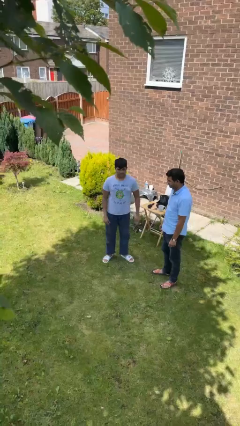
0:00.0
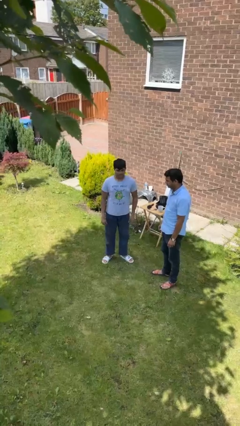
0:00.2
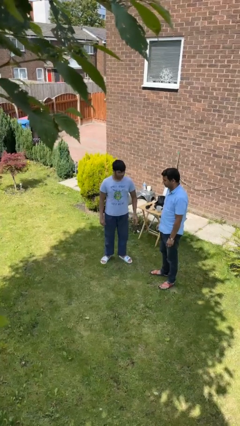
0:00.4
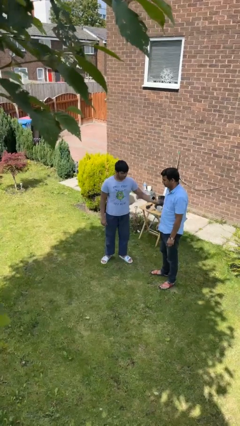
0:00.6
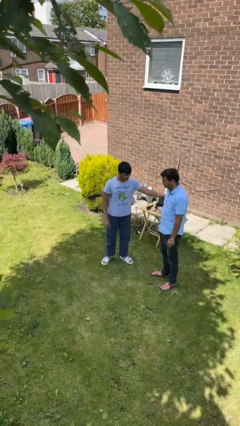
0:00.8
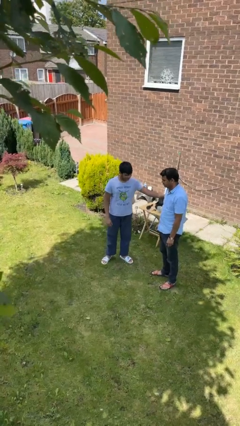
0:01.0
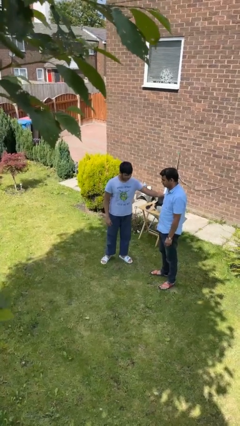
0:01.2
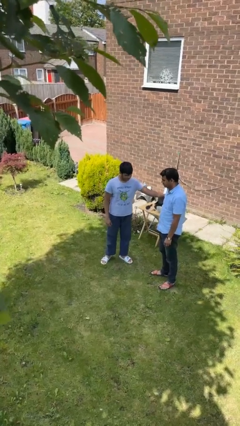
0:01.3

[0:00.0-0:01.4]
person grabs person by bicep

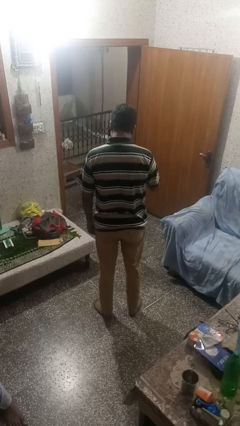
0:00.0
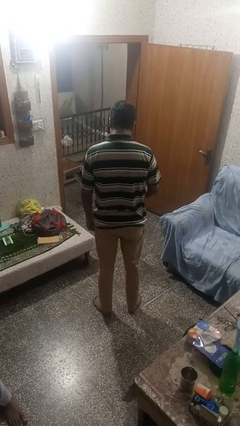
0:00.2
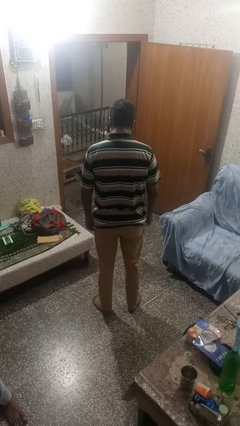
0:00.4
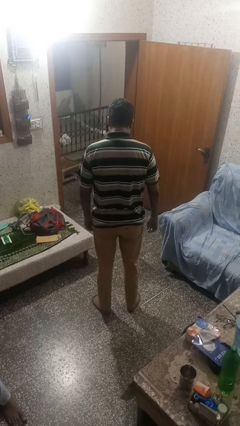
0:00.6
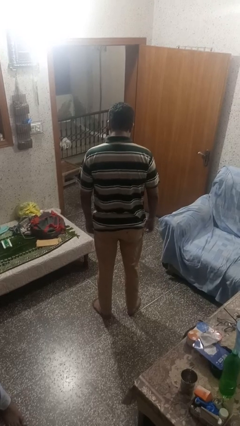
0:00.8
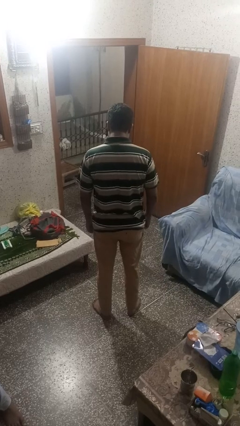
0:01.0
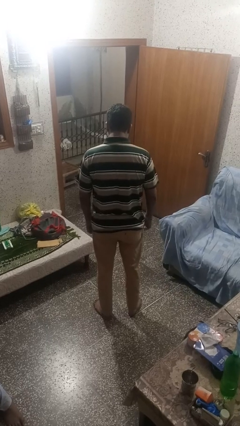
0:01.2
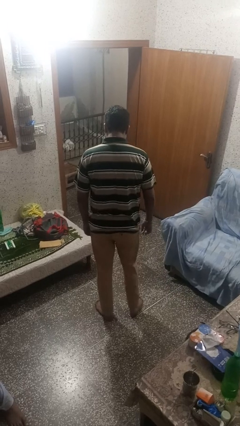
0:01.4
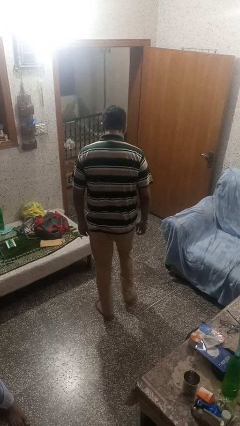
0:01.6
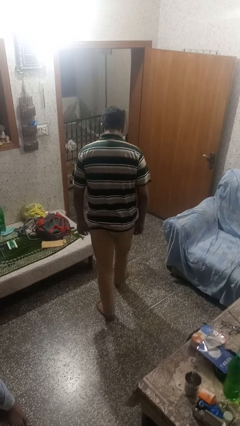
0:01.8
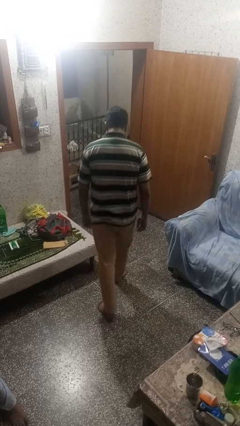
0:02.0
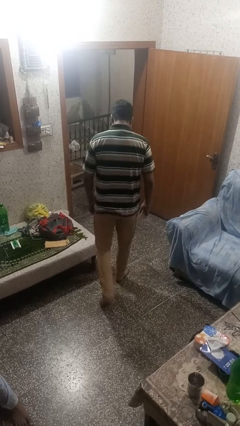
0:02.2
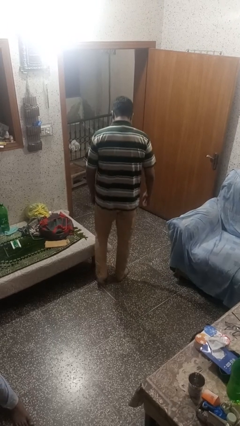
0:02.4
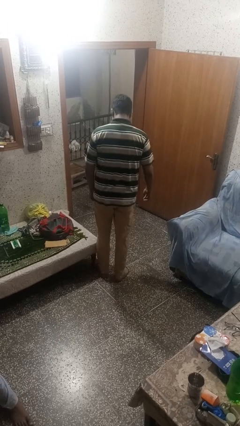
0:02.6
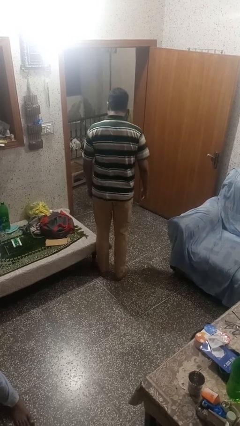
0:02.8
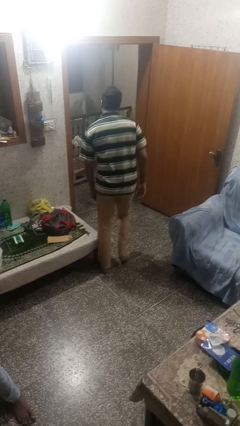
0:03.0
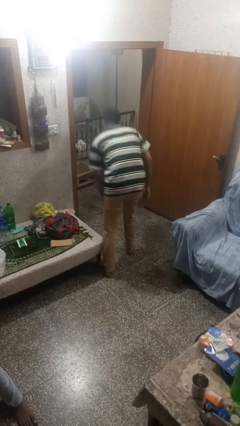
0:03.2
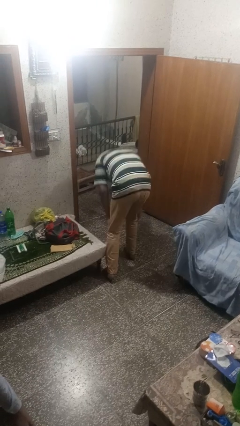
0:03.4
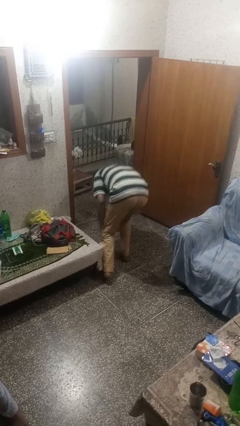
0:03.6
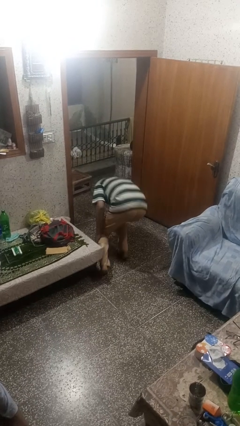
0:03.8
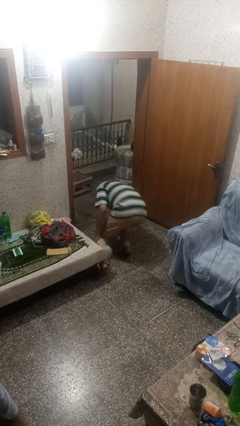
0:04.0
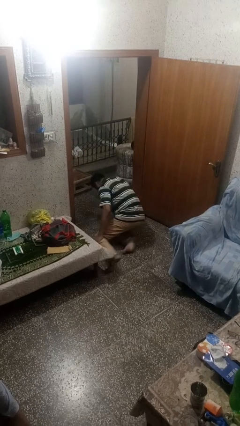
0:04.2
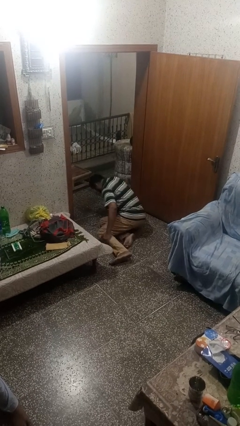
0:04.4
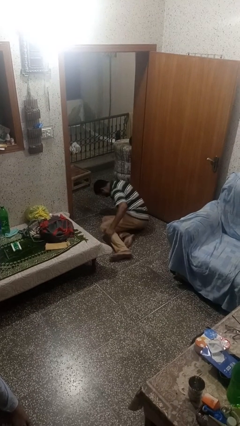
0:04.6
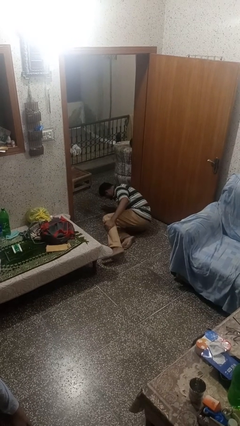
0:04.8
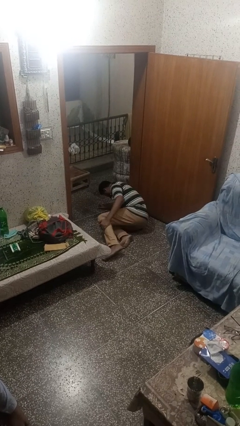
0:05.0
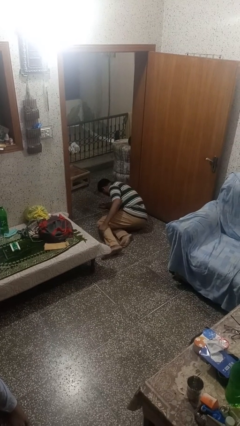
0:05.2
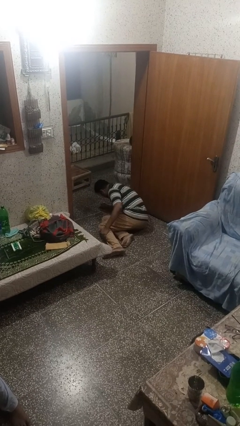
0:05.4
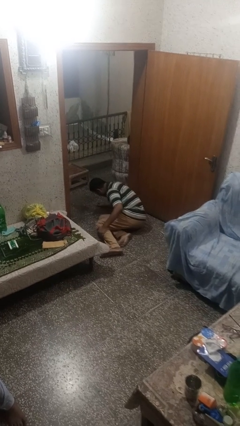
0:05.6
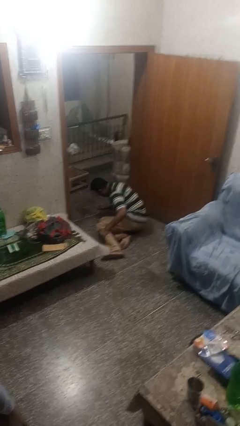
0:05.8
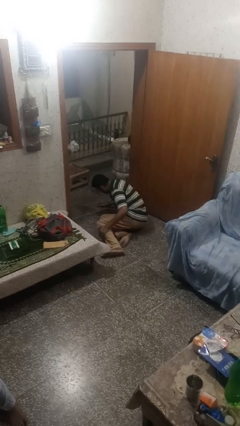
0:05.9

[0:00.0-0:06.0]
person trips on object on floor

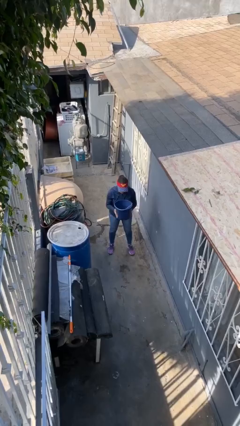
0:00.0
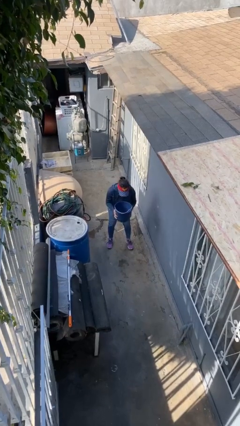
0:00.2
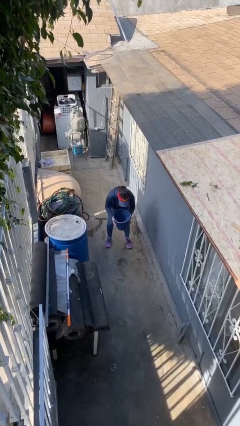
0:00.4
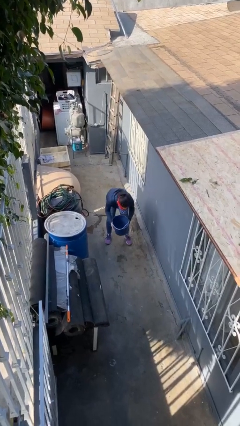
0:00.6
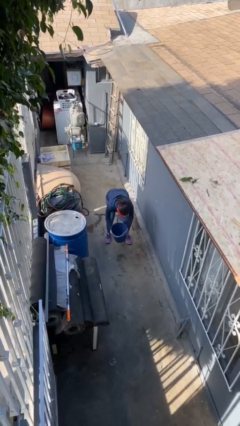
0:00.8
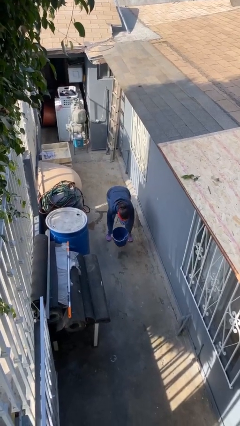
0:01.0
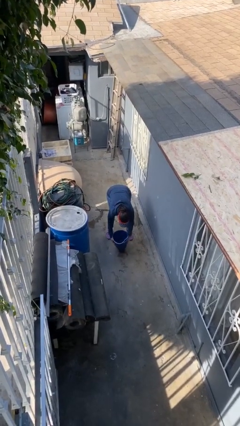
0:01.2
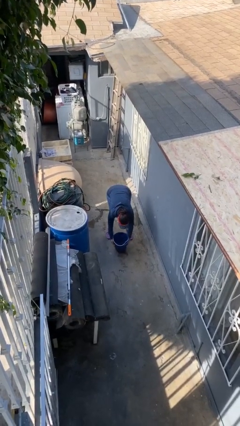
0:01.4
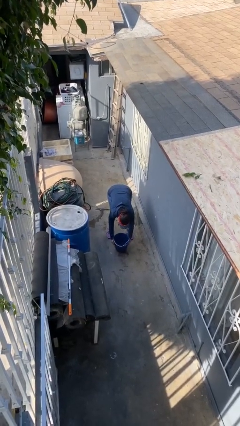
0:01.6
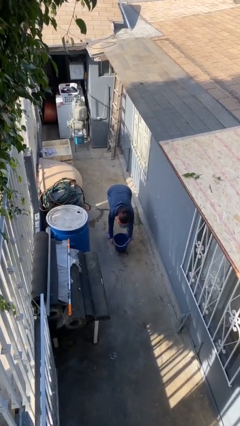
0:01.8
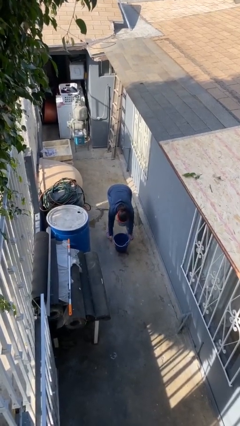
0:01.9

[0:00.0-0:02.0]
person puts down object on floor

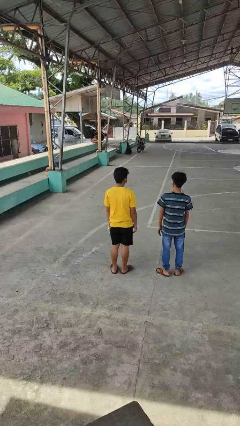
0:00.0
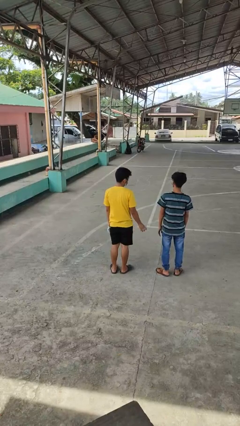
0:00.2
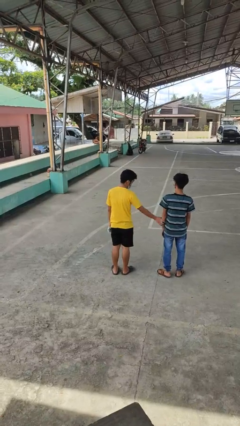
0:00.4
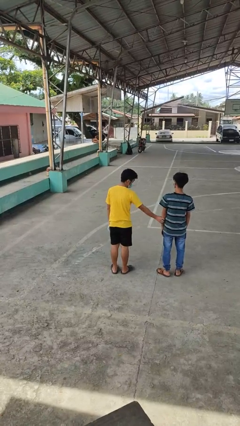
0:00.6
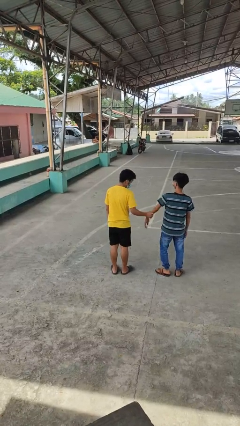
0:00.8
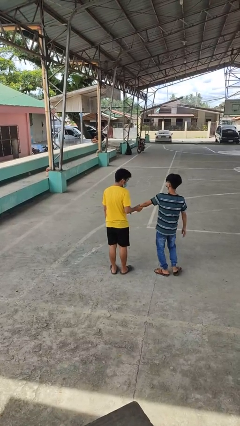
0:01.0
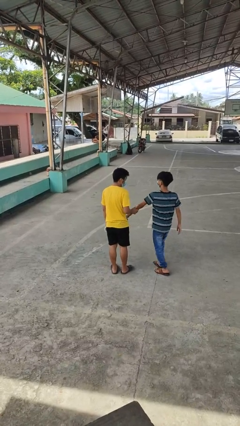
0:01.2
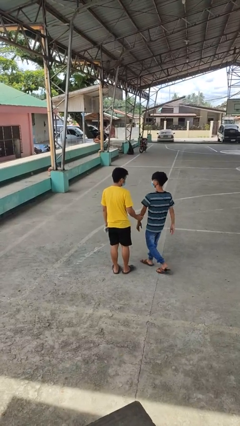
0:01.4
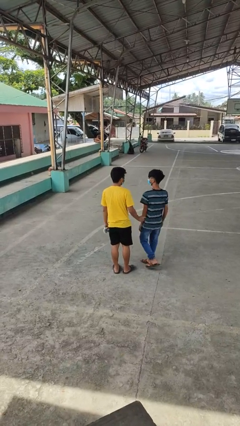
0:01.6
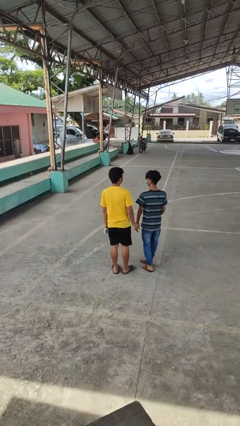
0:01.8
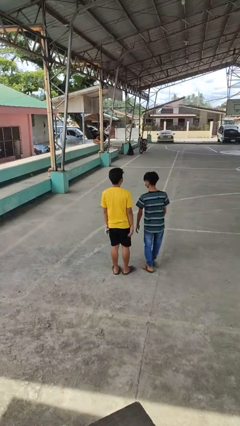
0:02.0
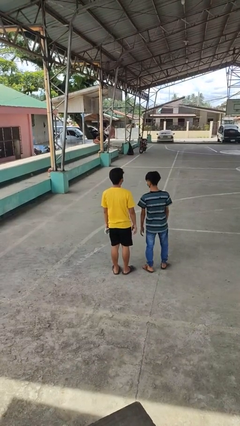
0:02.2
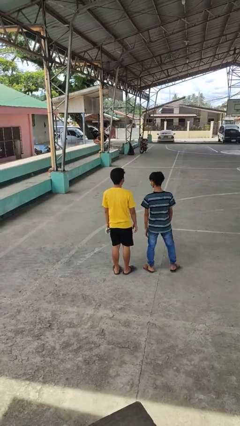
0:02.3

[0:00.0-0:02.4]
person grabs person by forearm

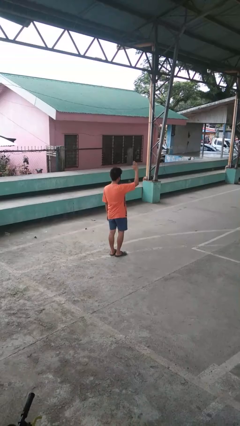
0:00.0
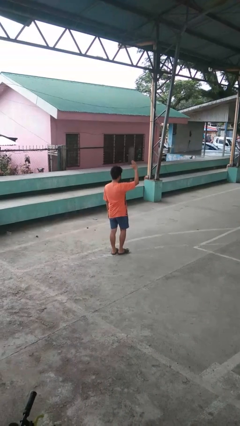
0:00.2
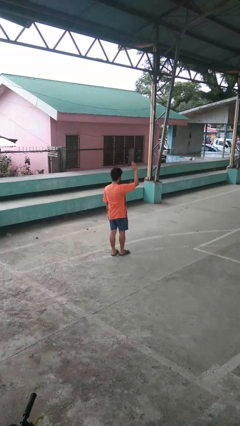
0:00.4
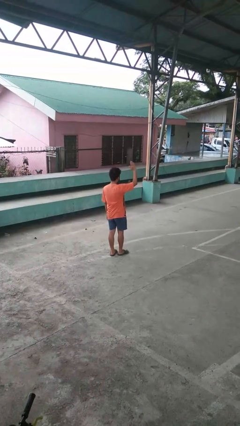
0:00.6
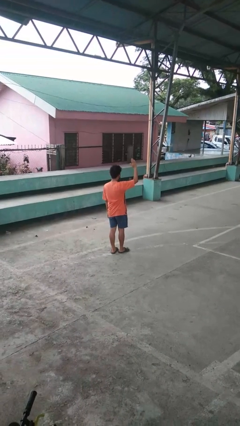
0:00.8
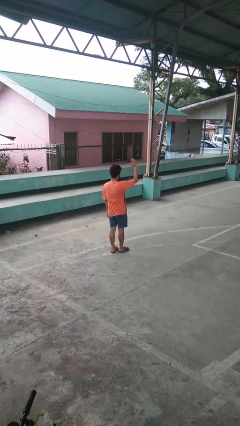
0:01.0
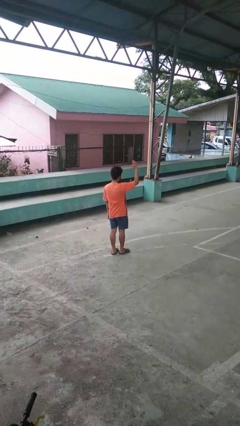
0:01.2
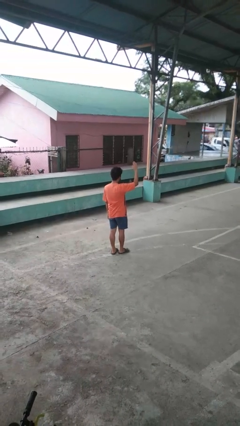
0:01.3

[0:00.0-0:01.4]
person gestures raise hand

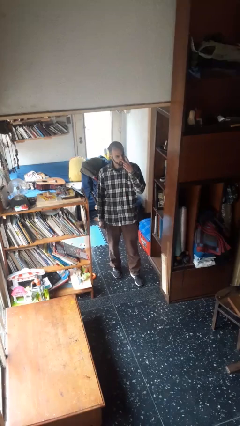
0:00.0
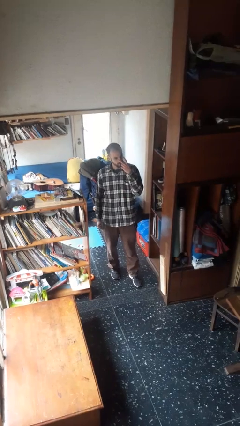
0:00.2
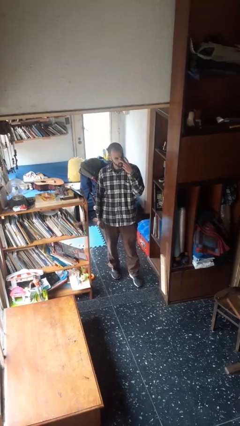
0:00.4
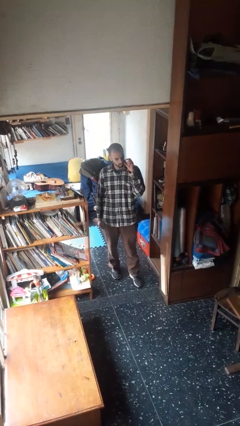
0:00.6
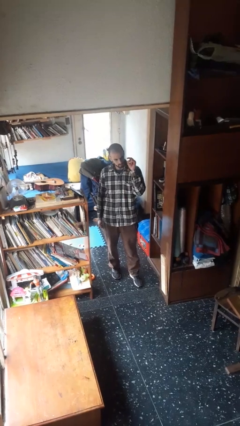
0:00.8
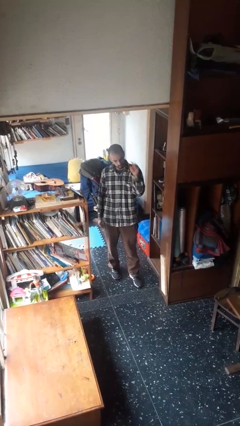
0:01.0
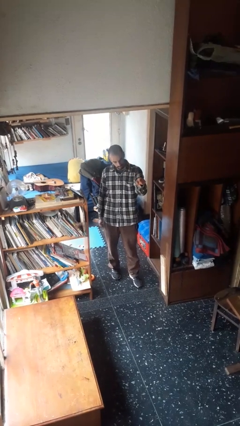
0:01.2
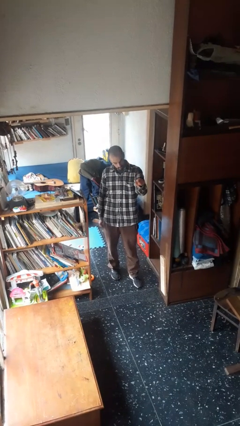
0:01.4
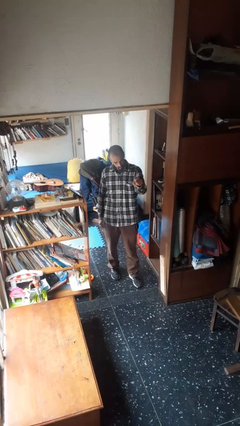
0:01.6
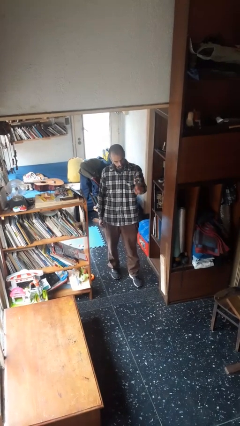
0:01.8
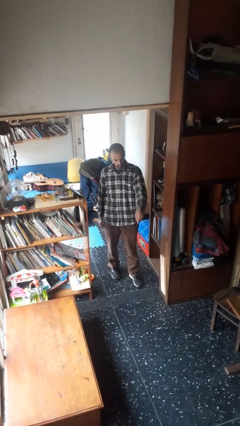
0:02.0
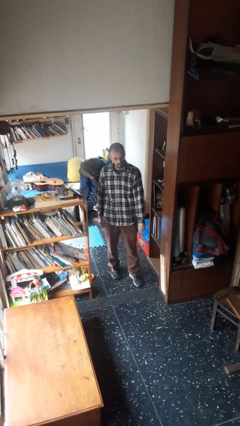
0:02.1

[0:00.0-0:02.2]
person gestures watch closely

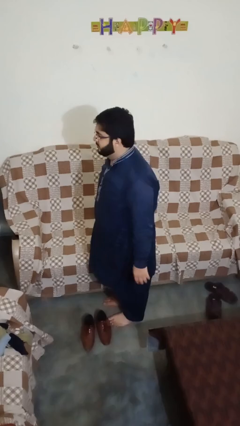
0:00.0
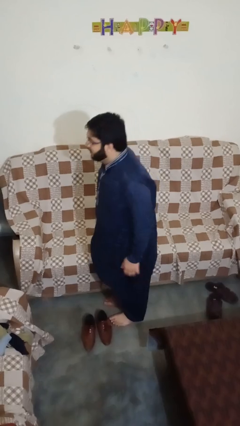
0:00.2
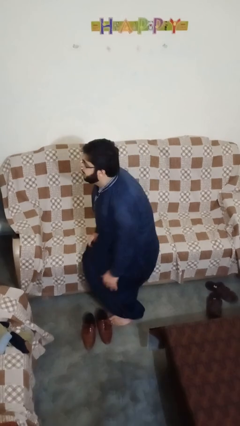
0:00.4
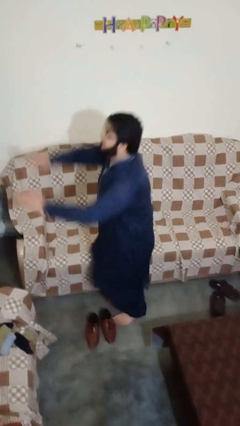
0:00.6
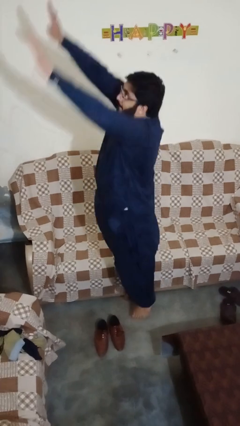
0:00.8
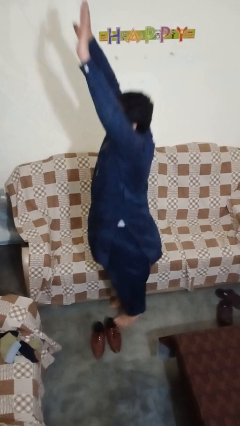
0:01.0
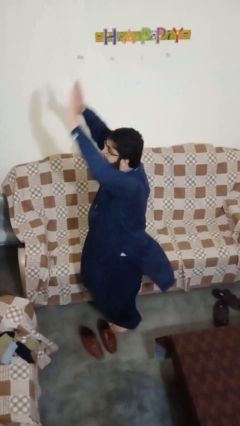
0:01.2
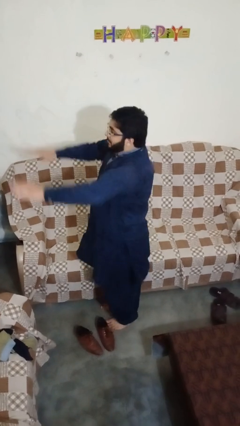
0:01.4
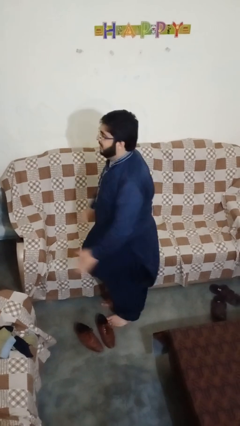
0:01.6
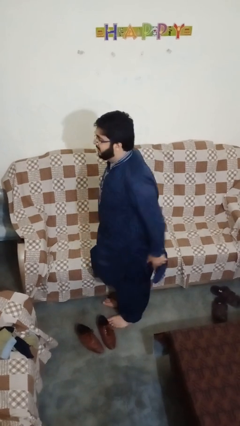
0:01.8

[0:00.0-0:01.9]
person jumps
